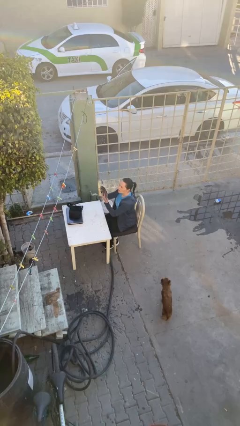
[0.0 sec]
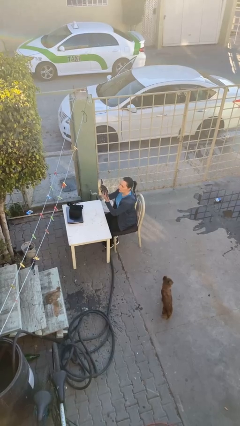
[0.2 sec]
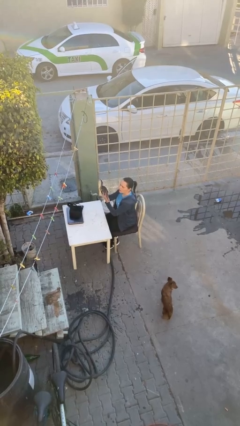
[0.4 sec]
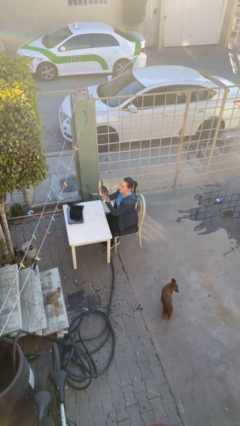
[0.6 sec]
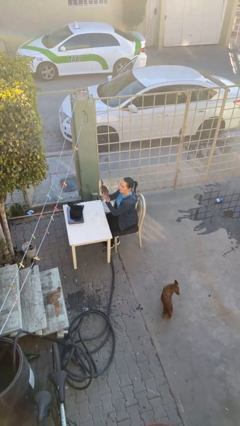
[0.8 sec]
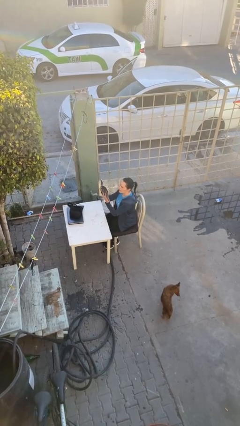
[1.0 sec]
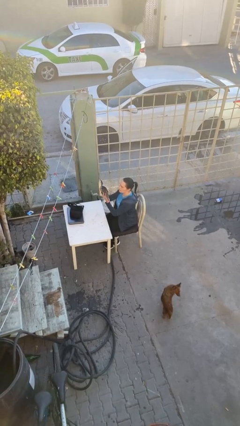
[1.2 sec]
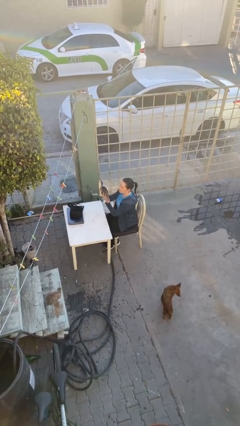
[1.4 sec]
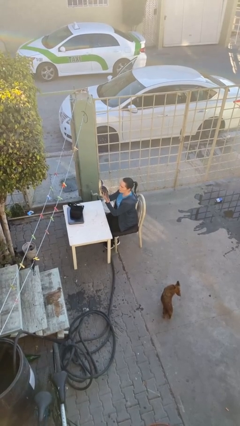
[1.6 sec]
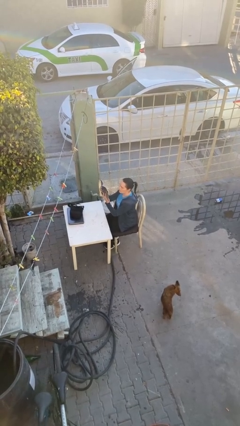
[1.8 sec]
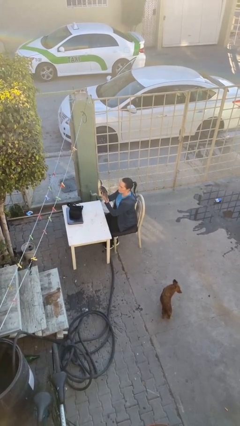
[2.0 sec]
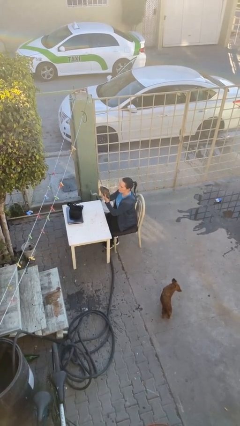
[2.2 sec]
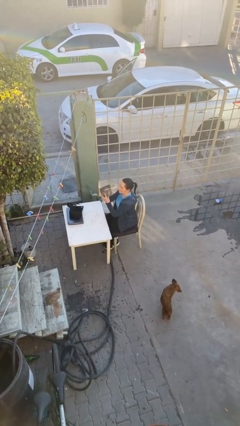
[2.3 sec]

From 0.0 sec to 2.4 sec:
person reads document

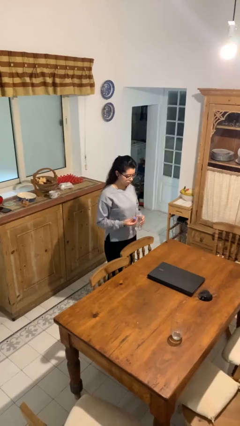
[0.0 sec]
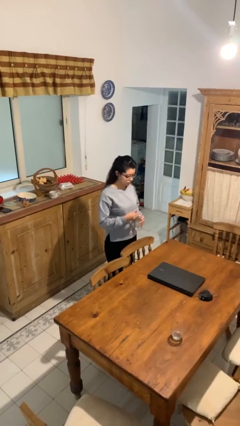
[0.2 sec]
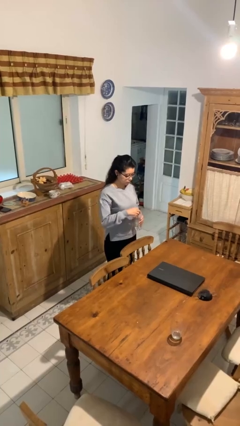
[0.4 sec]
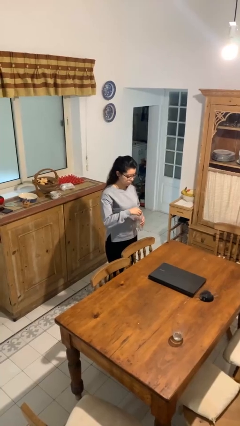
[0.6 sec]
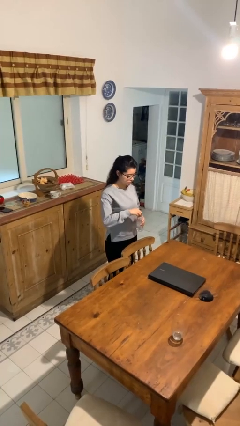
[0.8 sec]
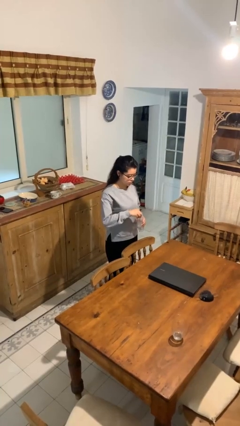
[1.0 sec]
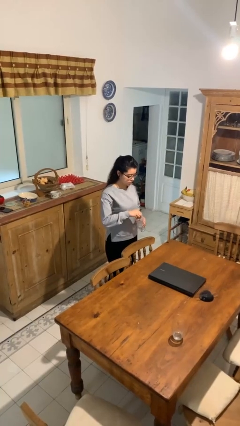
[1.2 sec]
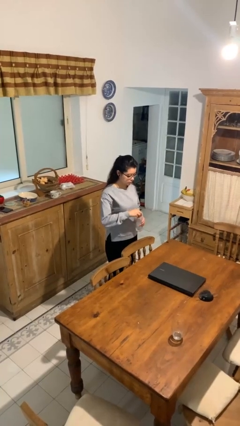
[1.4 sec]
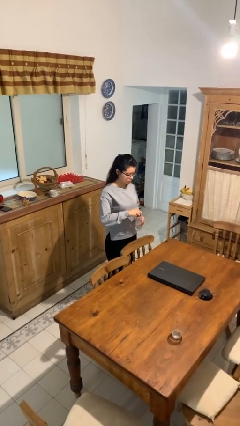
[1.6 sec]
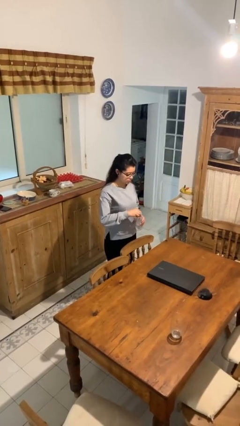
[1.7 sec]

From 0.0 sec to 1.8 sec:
person screws lid to bottle

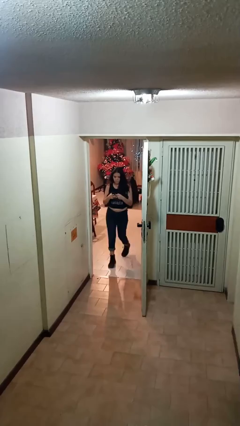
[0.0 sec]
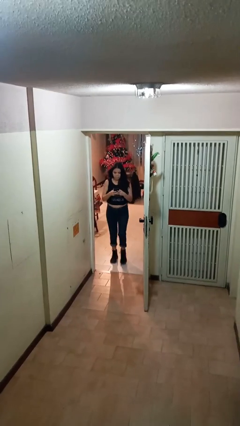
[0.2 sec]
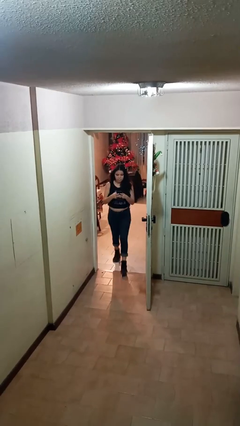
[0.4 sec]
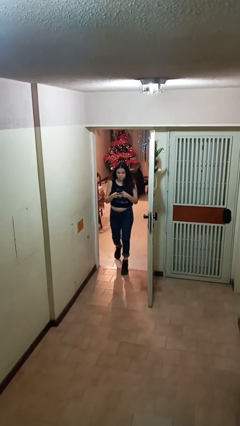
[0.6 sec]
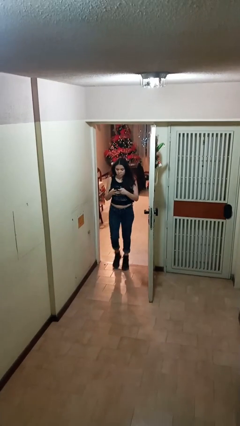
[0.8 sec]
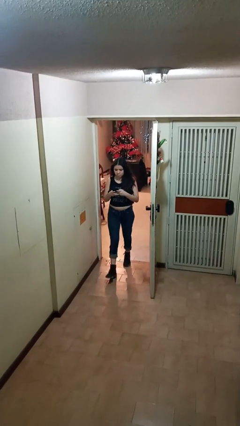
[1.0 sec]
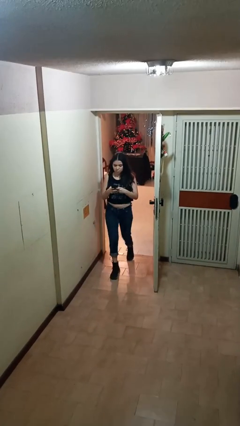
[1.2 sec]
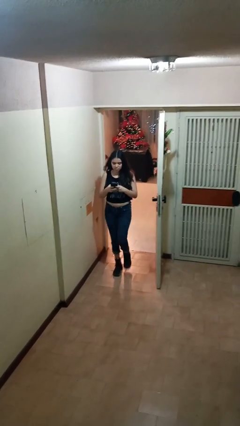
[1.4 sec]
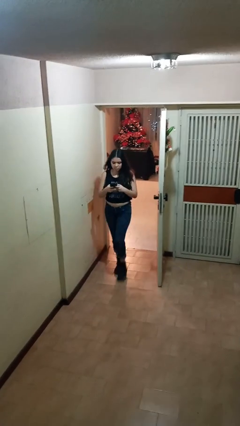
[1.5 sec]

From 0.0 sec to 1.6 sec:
person enters scene through structure

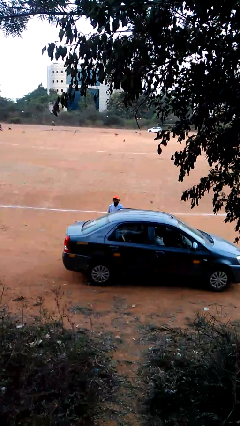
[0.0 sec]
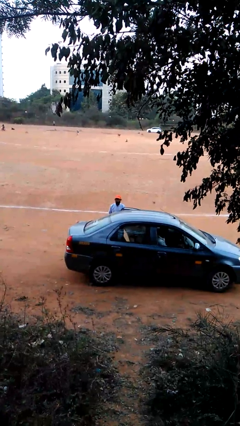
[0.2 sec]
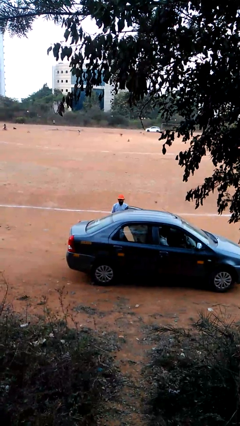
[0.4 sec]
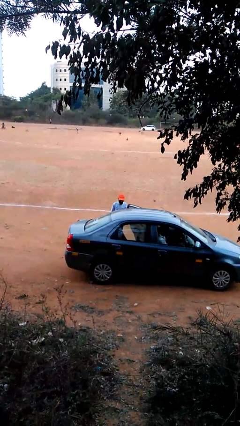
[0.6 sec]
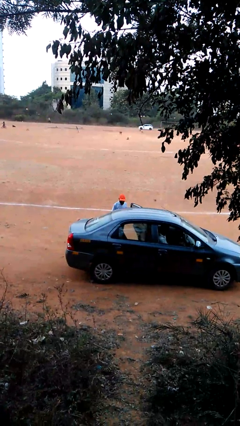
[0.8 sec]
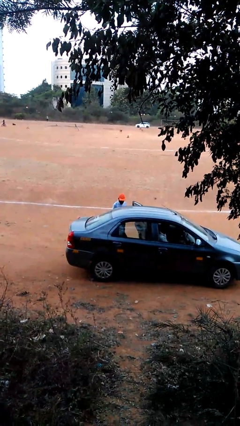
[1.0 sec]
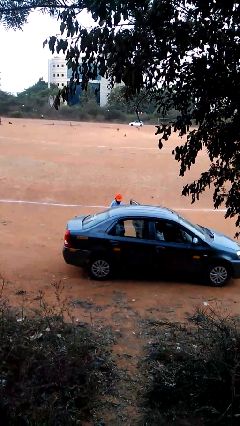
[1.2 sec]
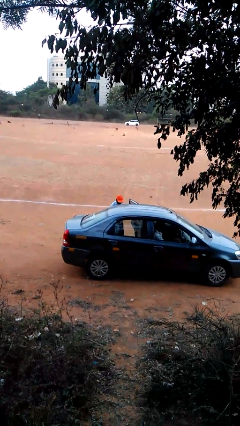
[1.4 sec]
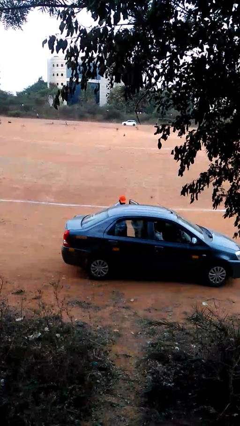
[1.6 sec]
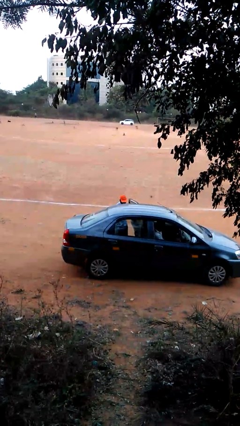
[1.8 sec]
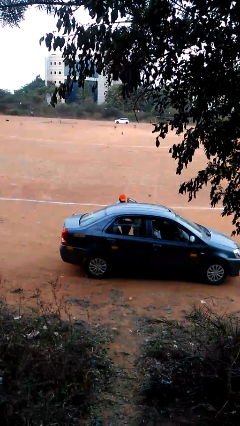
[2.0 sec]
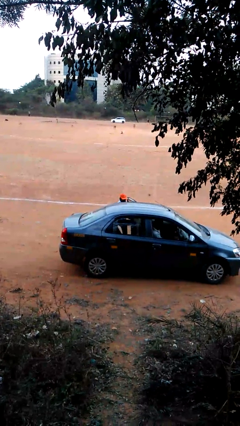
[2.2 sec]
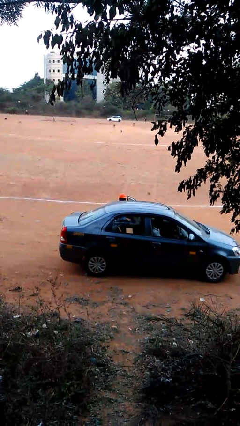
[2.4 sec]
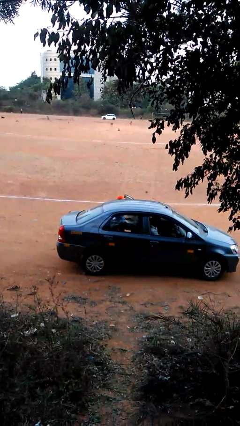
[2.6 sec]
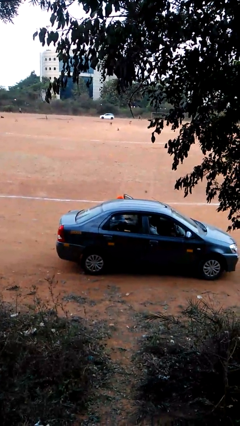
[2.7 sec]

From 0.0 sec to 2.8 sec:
person enters car

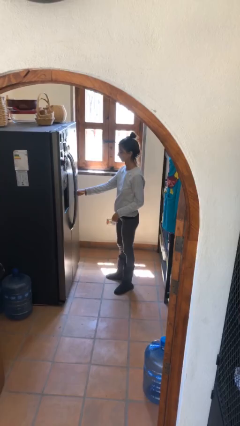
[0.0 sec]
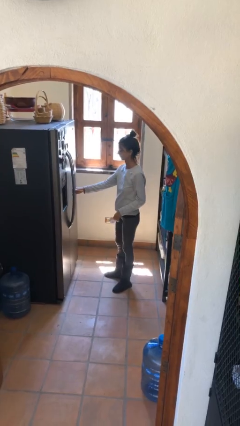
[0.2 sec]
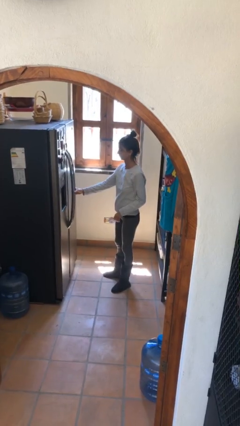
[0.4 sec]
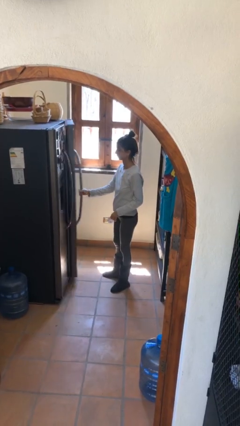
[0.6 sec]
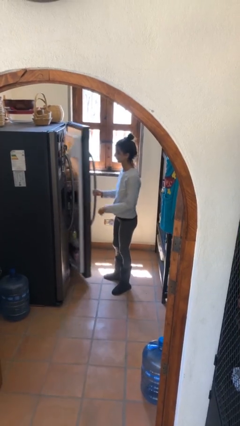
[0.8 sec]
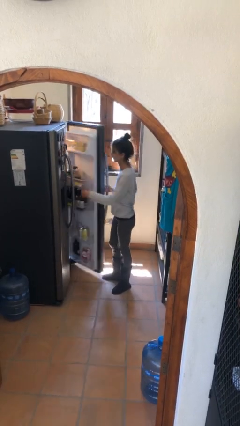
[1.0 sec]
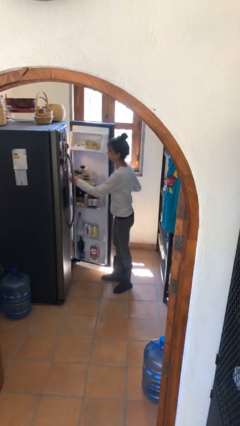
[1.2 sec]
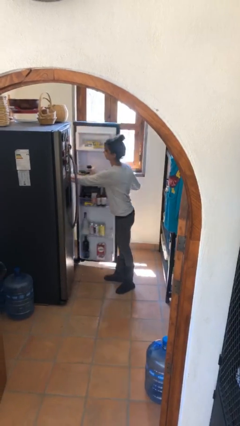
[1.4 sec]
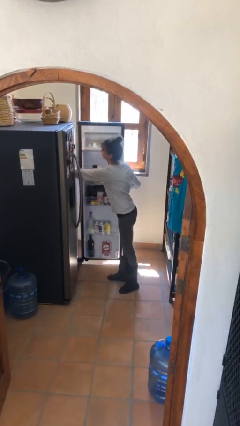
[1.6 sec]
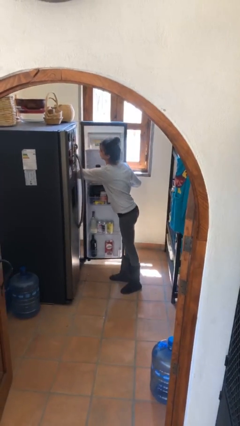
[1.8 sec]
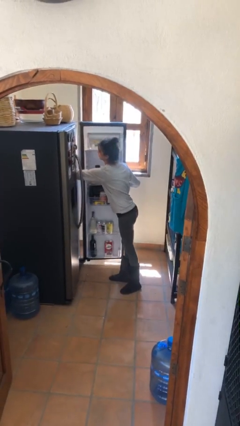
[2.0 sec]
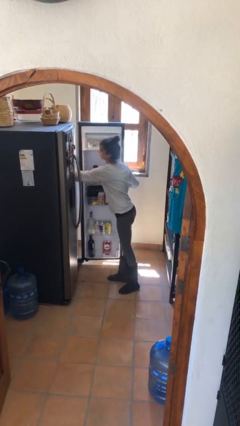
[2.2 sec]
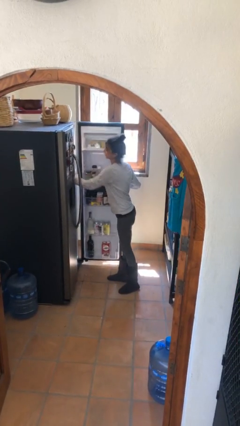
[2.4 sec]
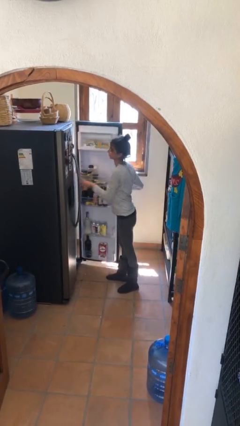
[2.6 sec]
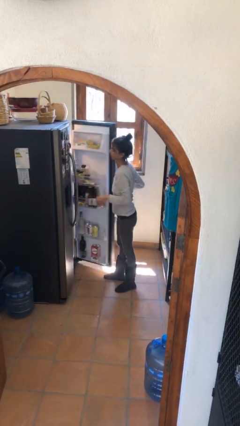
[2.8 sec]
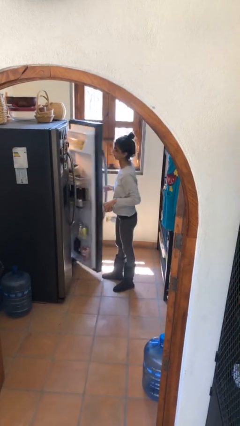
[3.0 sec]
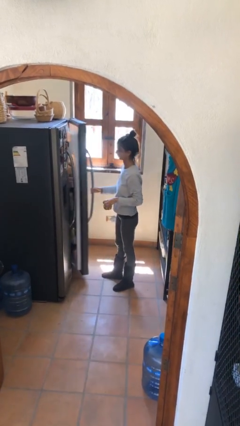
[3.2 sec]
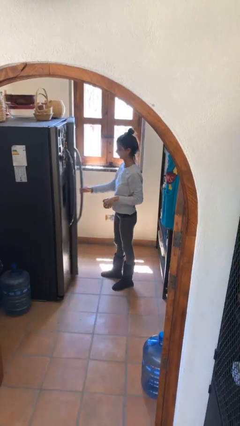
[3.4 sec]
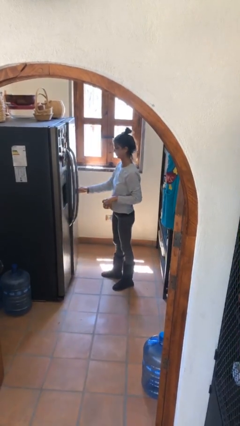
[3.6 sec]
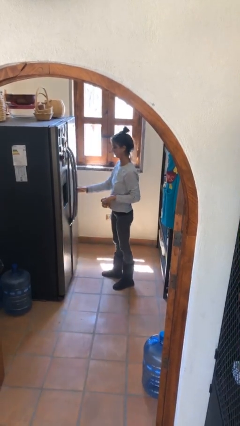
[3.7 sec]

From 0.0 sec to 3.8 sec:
person takes object from refrigerator

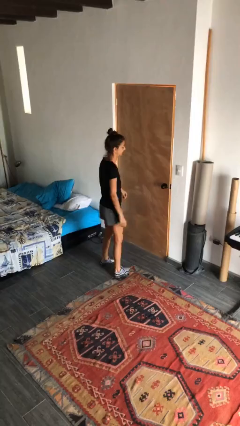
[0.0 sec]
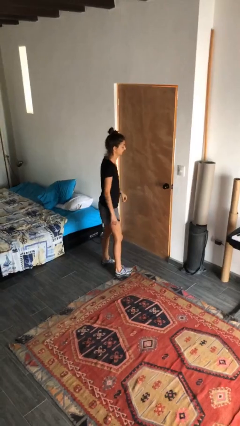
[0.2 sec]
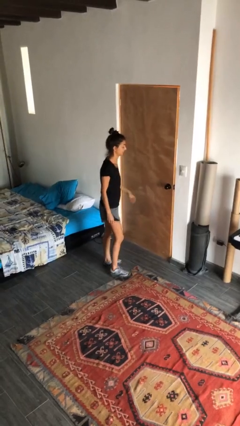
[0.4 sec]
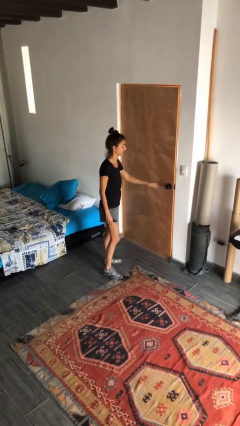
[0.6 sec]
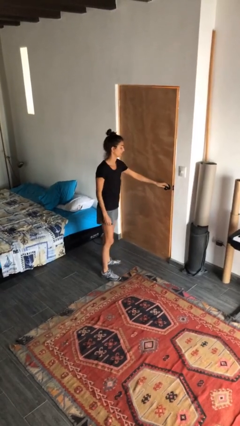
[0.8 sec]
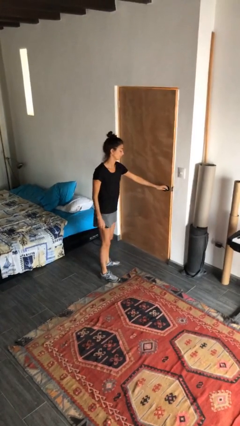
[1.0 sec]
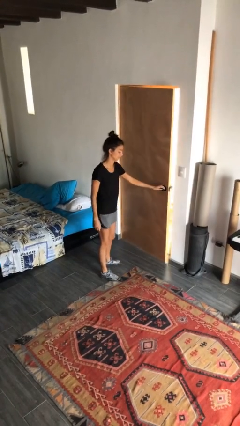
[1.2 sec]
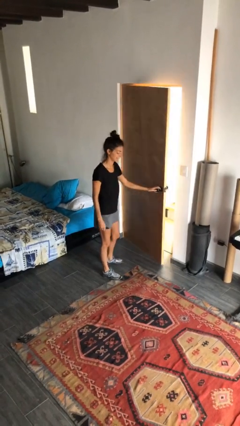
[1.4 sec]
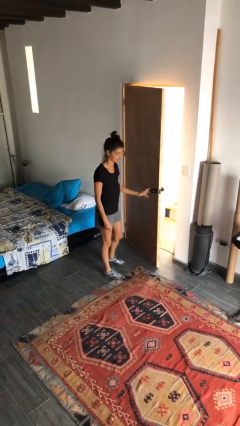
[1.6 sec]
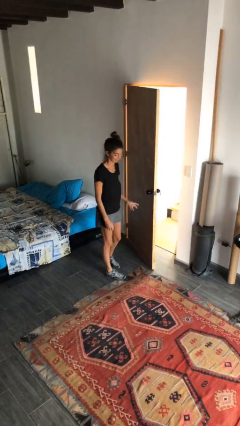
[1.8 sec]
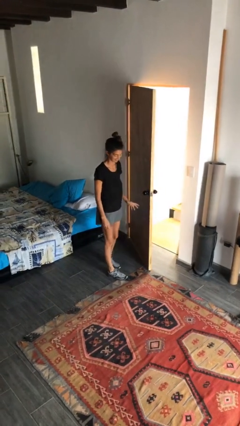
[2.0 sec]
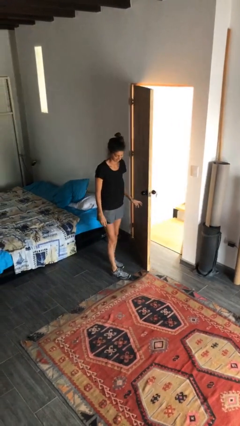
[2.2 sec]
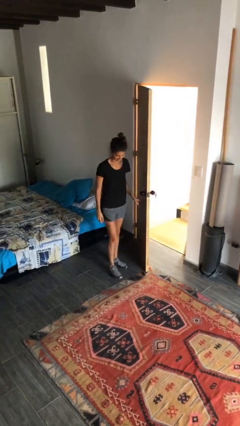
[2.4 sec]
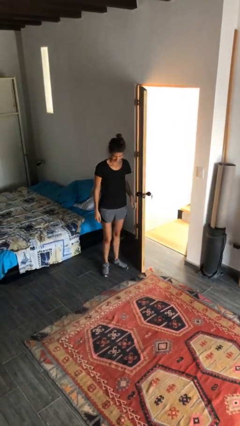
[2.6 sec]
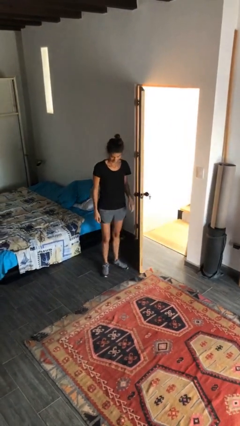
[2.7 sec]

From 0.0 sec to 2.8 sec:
person opens facility door

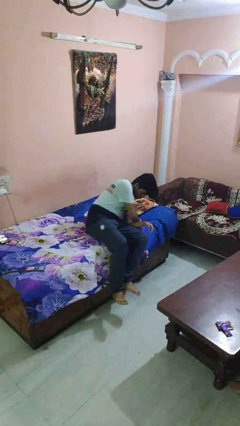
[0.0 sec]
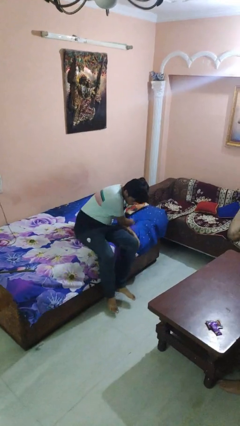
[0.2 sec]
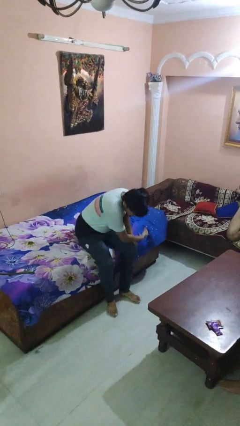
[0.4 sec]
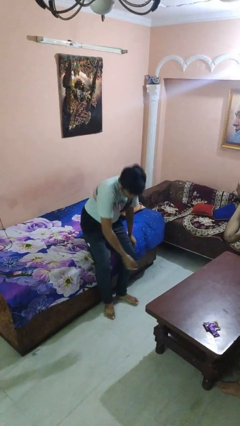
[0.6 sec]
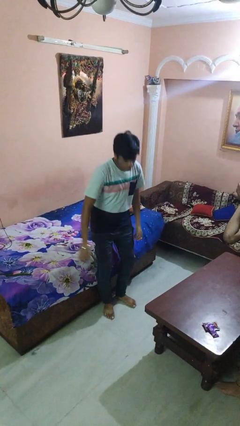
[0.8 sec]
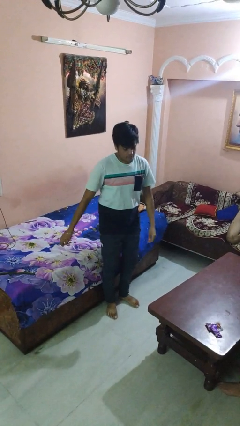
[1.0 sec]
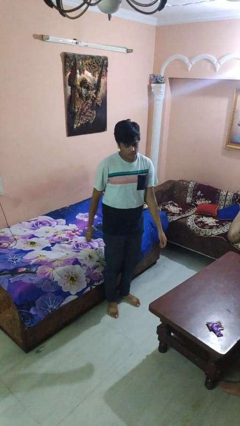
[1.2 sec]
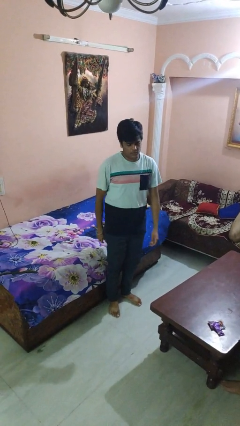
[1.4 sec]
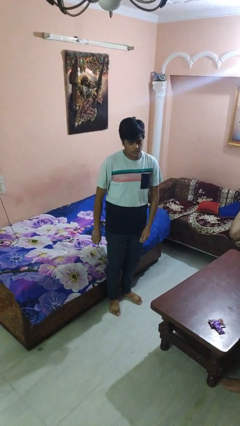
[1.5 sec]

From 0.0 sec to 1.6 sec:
person stands up
